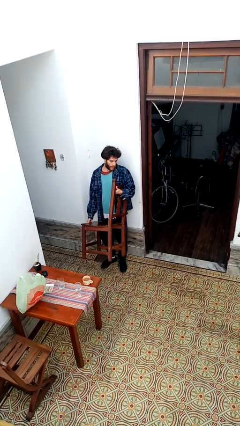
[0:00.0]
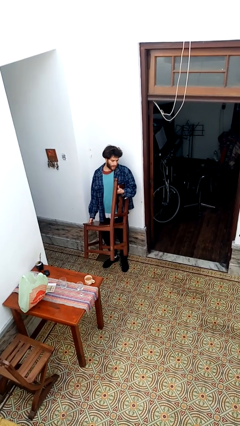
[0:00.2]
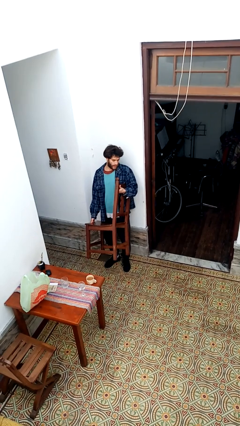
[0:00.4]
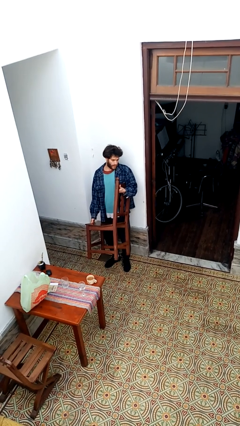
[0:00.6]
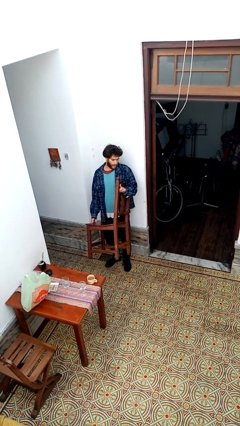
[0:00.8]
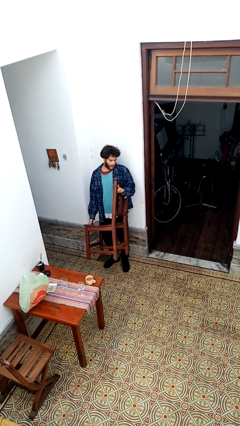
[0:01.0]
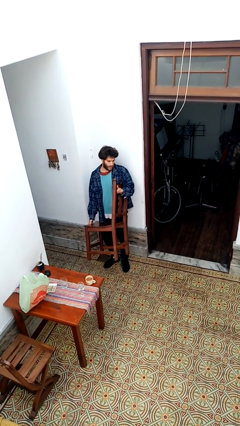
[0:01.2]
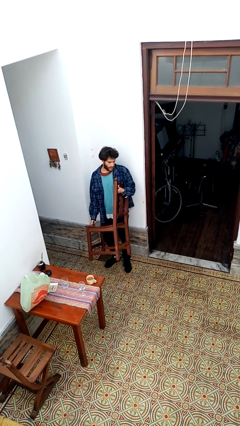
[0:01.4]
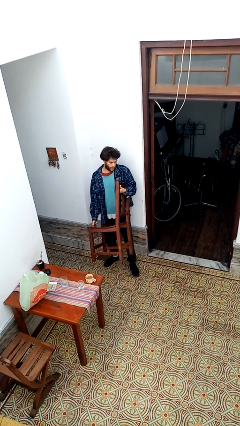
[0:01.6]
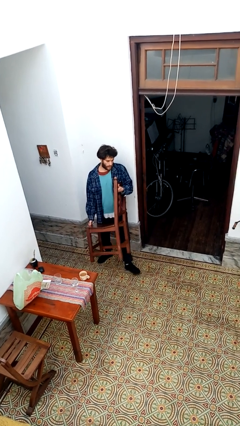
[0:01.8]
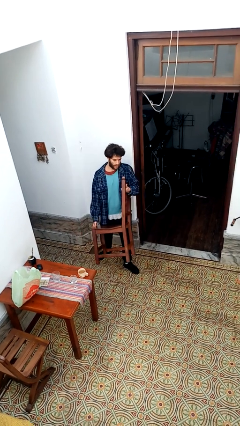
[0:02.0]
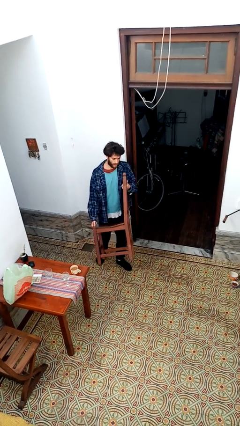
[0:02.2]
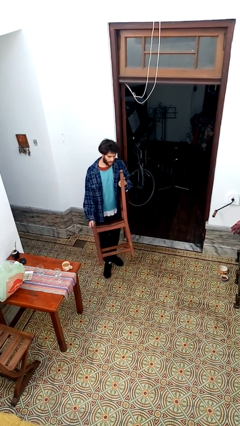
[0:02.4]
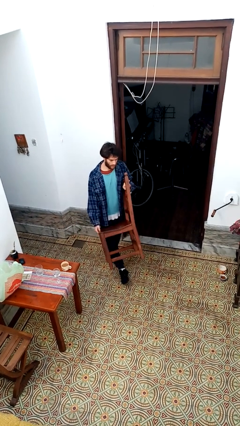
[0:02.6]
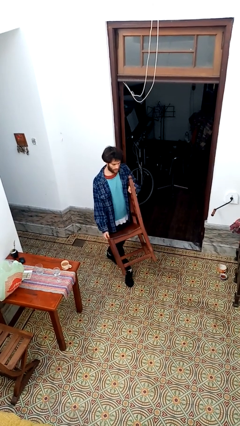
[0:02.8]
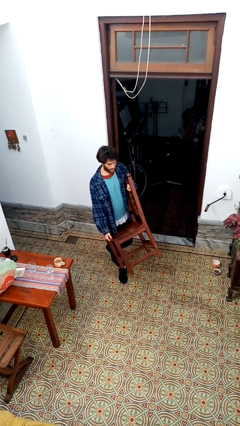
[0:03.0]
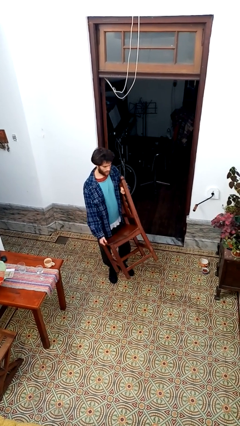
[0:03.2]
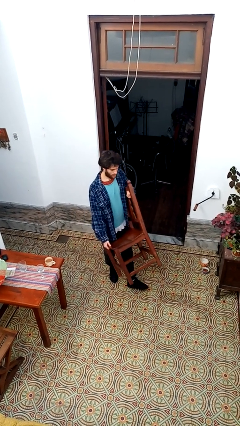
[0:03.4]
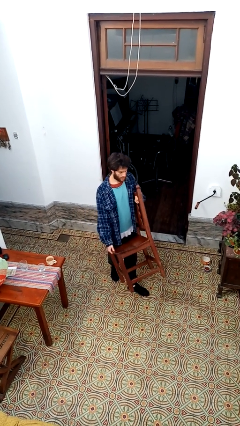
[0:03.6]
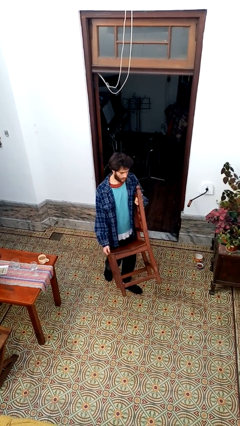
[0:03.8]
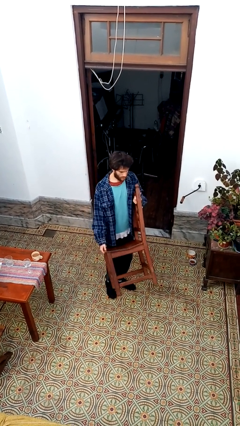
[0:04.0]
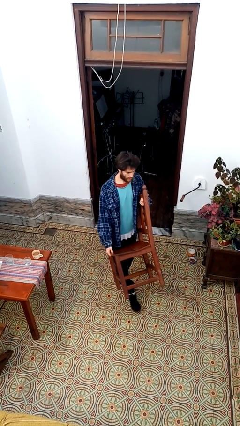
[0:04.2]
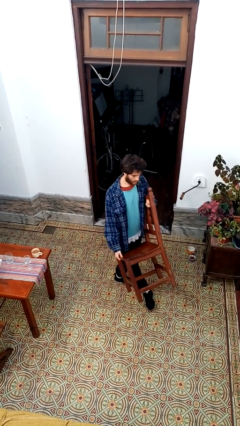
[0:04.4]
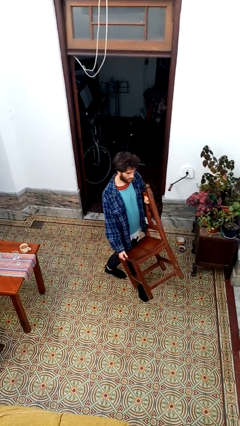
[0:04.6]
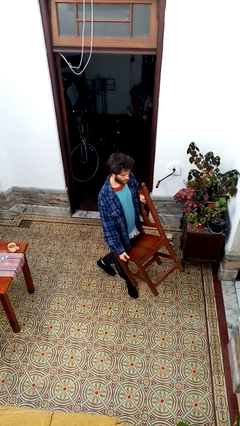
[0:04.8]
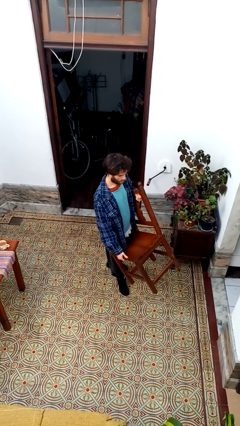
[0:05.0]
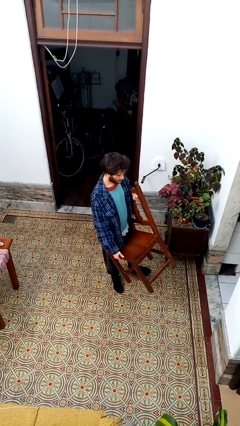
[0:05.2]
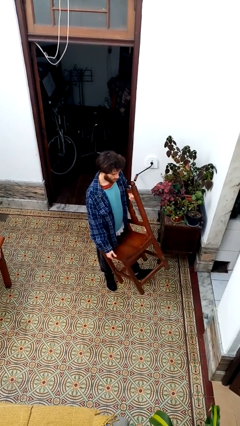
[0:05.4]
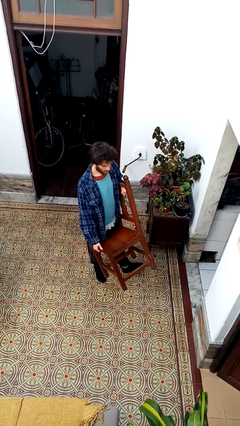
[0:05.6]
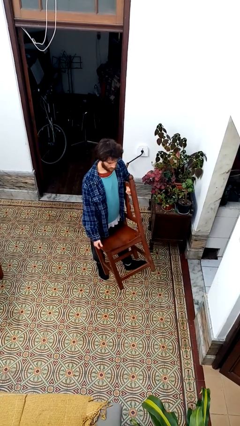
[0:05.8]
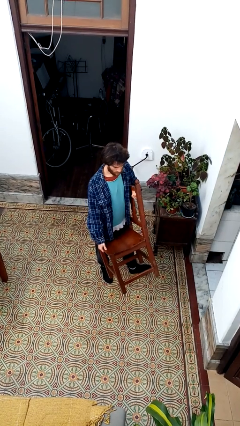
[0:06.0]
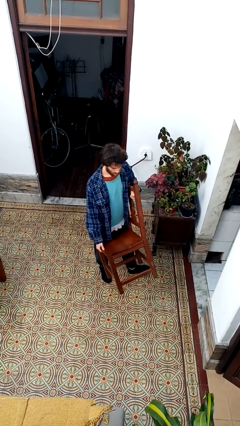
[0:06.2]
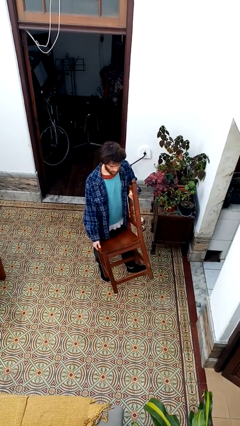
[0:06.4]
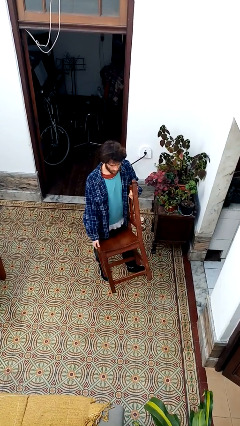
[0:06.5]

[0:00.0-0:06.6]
person carries furniture

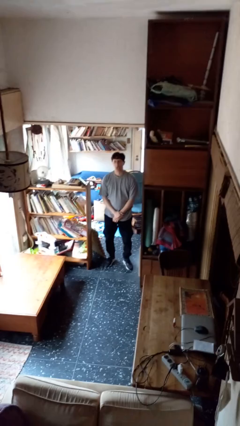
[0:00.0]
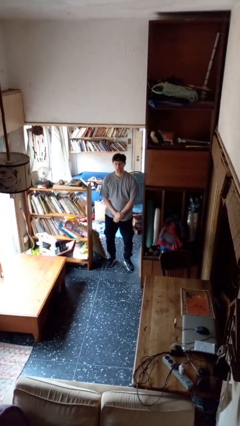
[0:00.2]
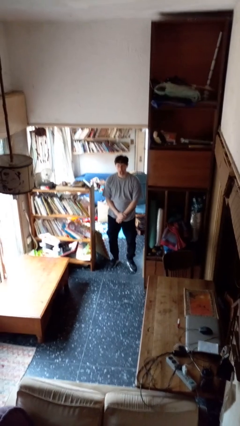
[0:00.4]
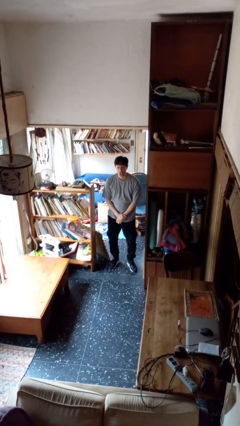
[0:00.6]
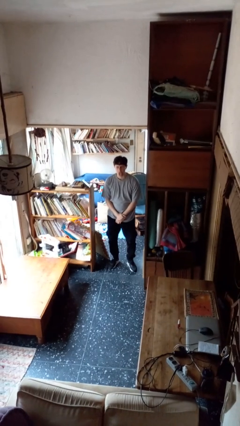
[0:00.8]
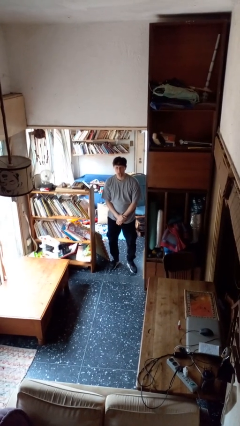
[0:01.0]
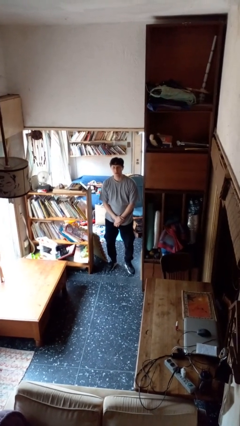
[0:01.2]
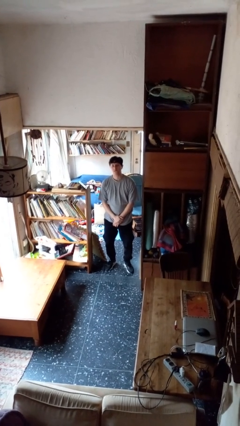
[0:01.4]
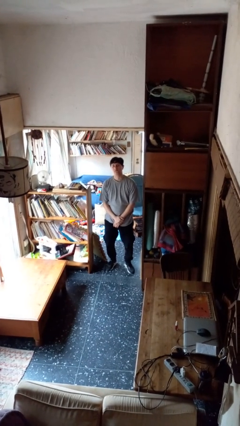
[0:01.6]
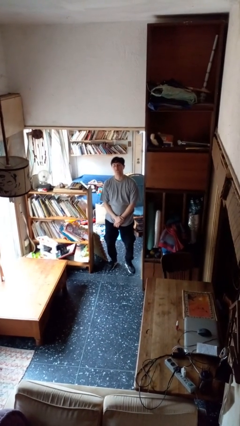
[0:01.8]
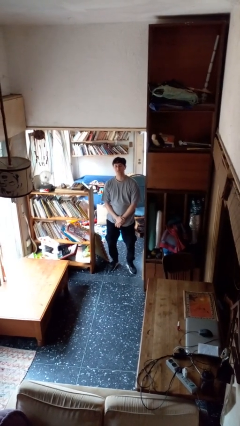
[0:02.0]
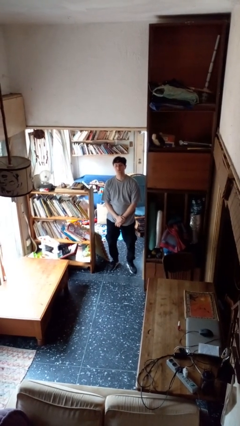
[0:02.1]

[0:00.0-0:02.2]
person sticks out tongue

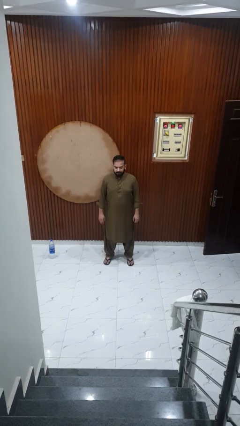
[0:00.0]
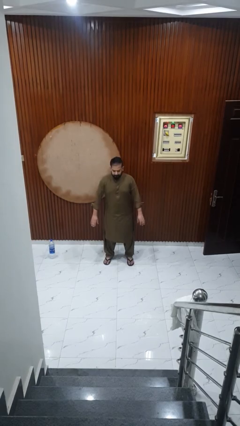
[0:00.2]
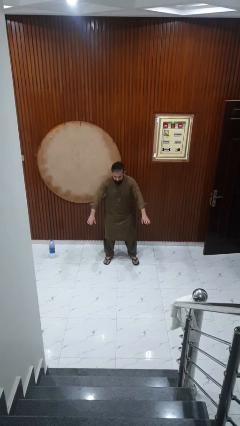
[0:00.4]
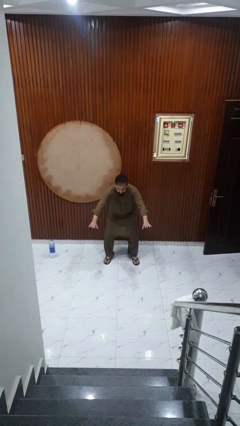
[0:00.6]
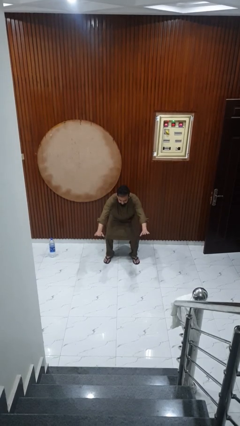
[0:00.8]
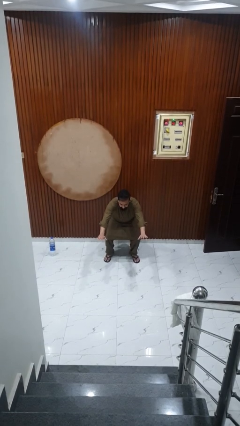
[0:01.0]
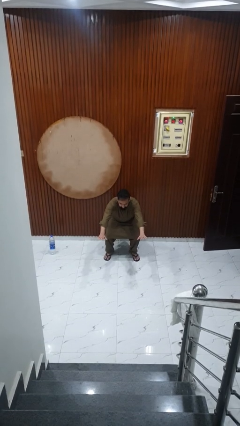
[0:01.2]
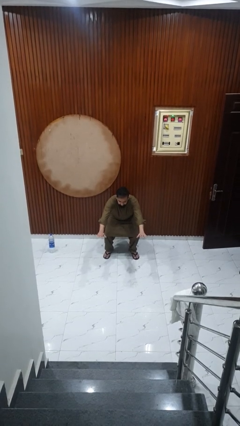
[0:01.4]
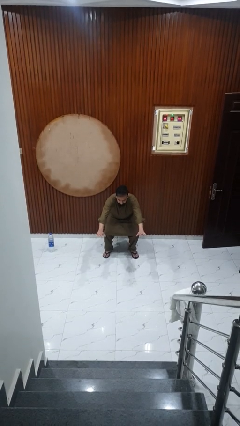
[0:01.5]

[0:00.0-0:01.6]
person squats

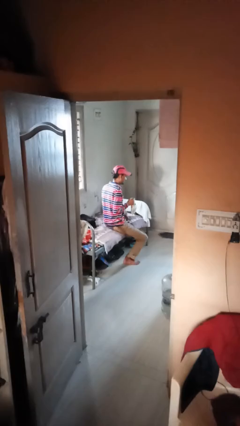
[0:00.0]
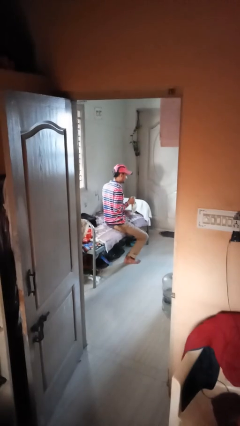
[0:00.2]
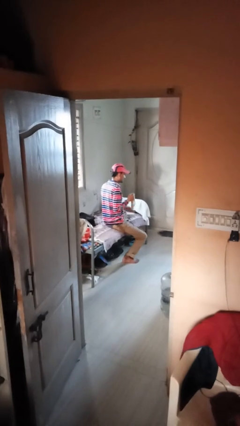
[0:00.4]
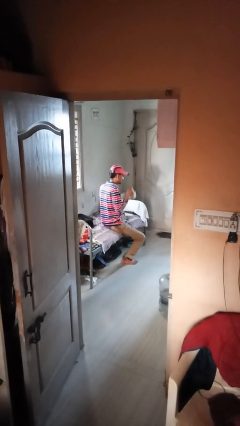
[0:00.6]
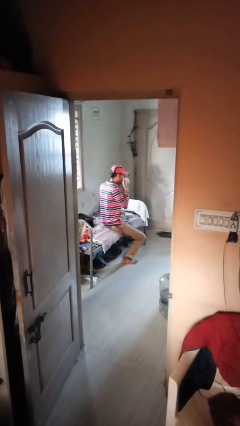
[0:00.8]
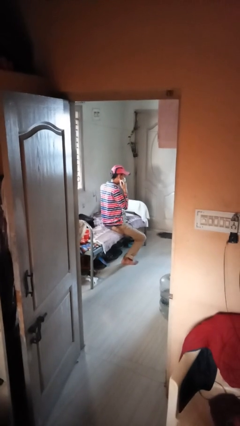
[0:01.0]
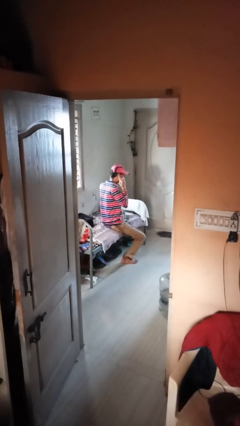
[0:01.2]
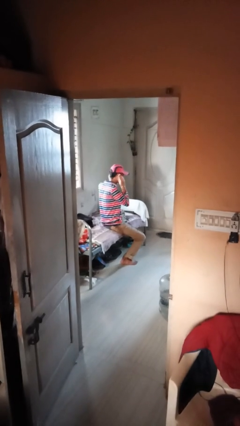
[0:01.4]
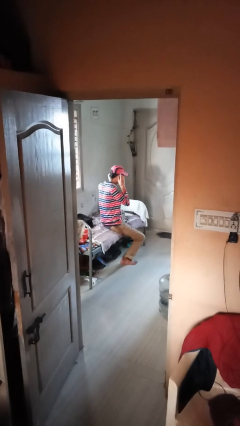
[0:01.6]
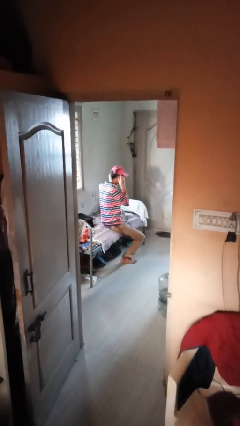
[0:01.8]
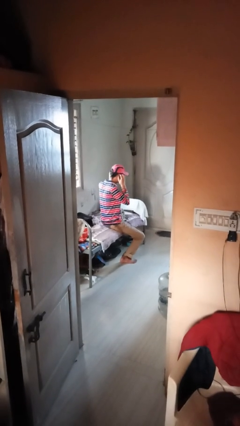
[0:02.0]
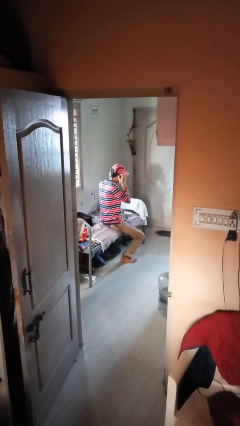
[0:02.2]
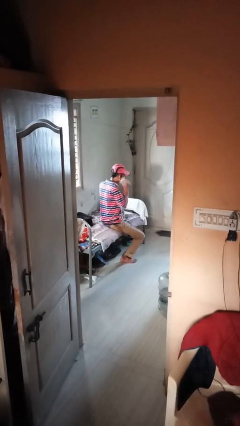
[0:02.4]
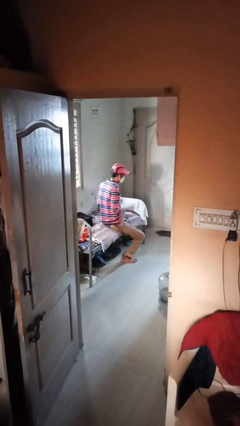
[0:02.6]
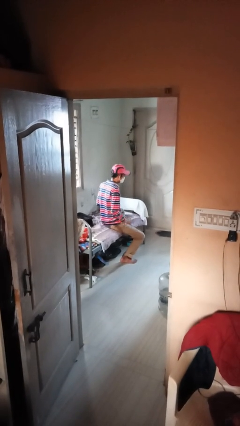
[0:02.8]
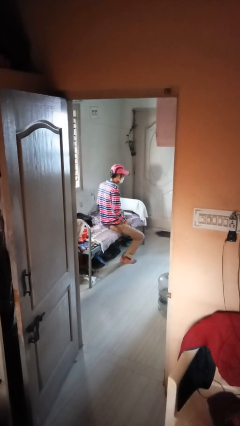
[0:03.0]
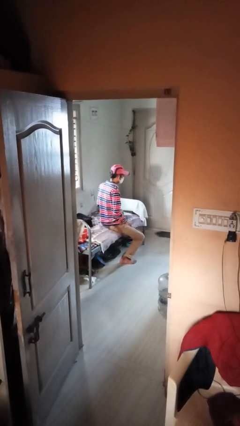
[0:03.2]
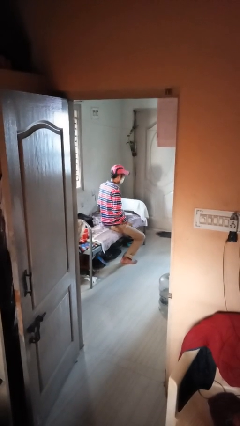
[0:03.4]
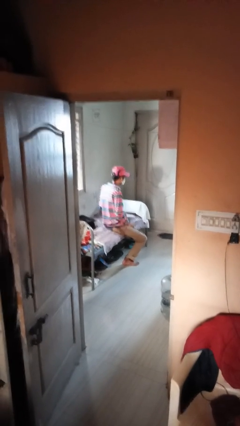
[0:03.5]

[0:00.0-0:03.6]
person puts on facemask

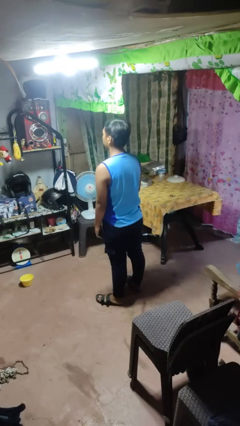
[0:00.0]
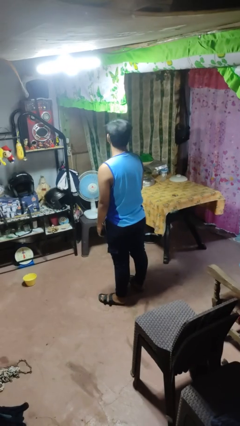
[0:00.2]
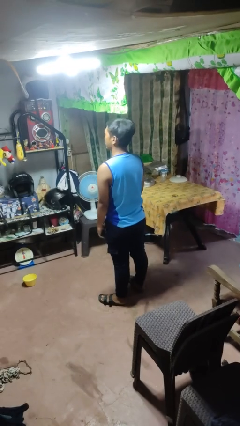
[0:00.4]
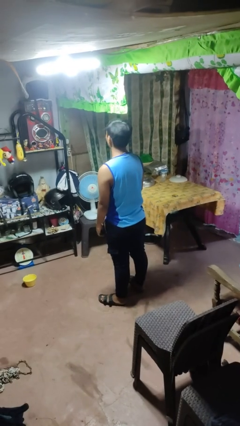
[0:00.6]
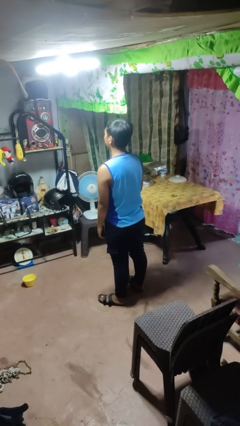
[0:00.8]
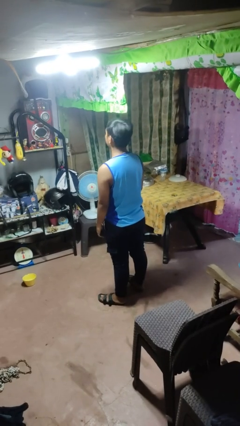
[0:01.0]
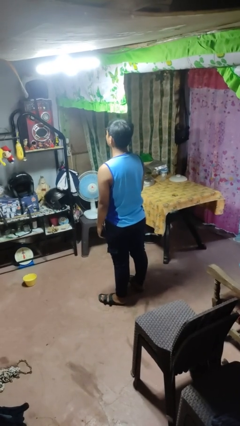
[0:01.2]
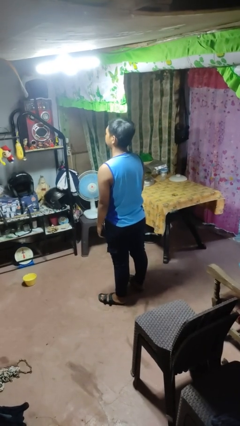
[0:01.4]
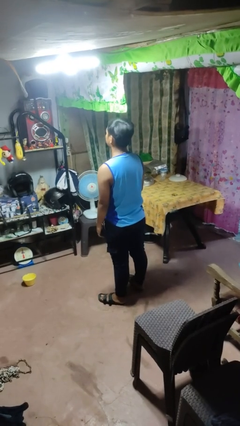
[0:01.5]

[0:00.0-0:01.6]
person shakes head

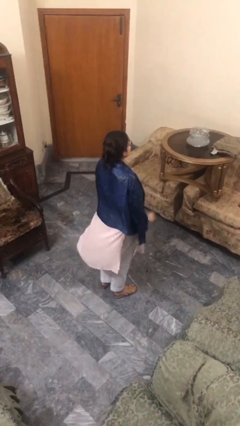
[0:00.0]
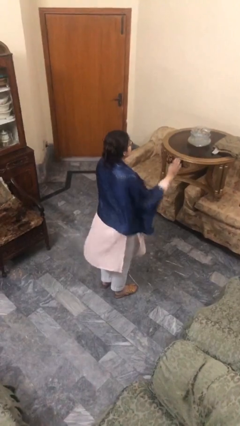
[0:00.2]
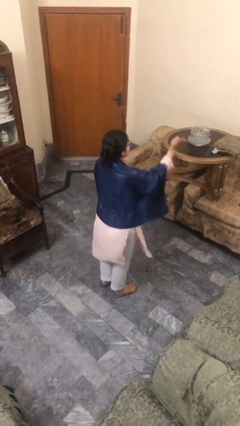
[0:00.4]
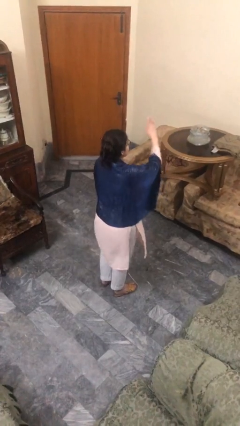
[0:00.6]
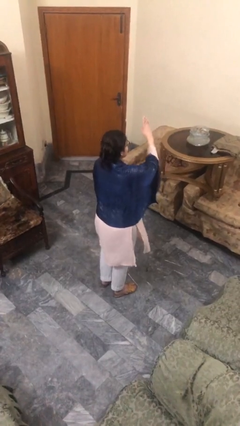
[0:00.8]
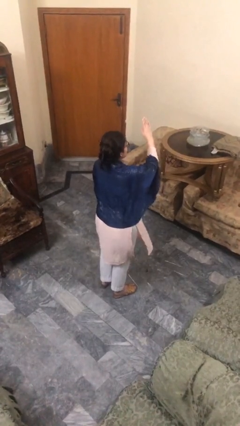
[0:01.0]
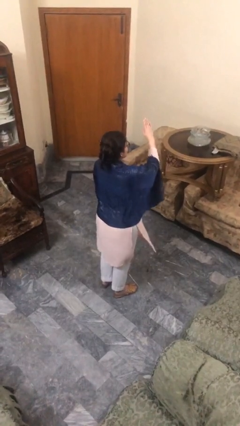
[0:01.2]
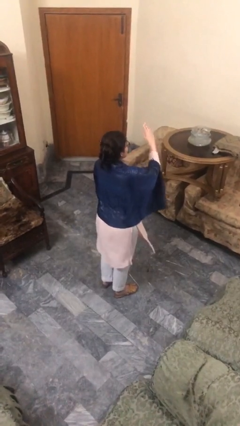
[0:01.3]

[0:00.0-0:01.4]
person gestures swipe left

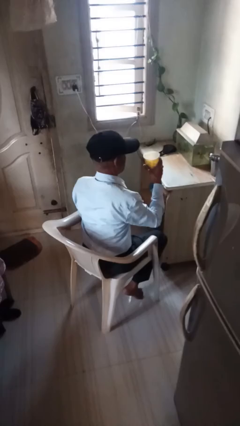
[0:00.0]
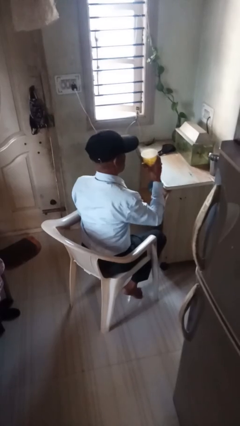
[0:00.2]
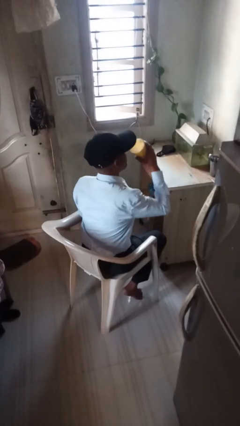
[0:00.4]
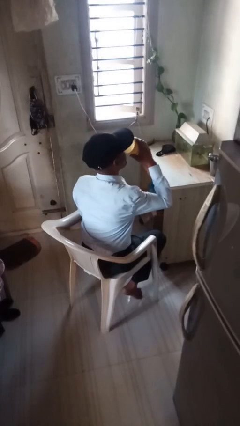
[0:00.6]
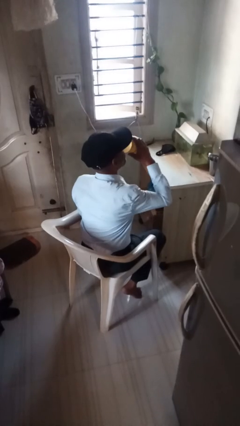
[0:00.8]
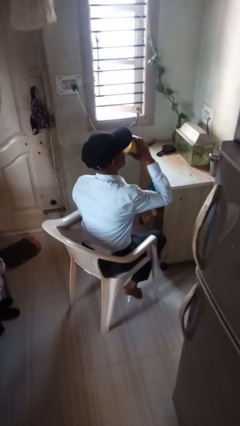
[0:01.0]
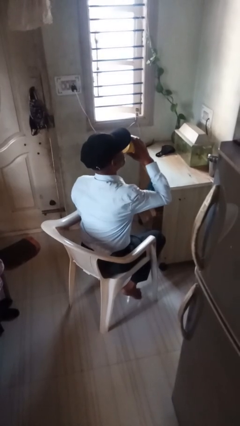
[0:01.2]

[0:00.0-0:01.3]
person drinks from mug
